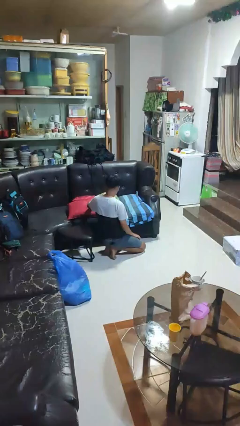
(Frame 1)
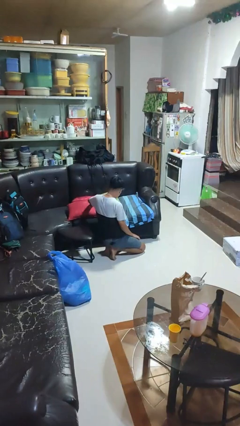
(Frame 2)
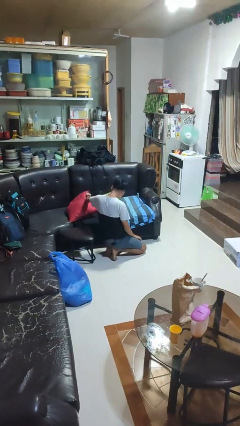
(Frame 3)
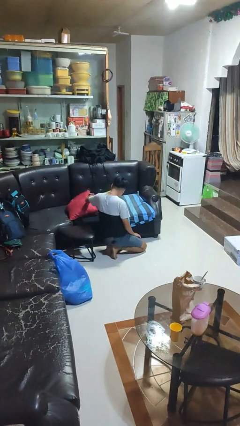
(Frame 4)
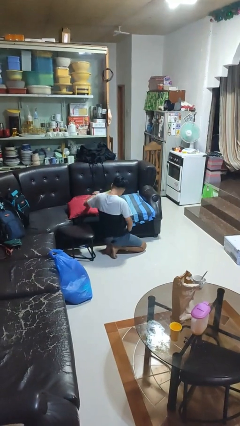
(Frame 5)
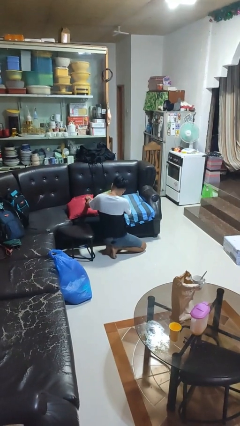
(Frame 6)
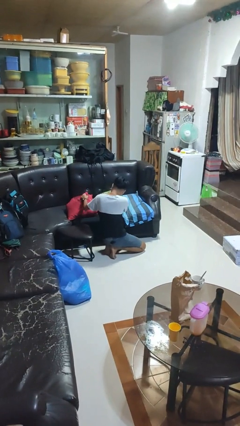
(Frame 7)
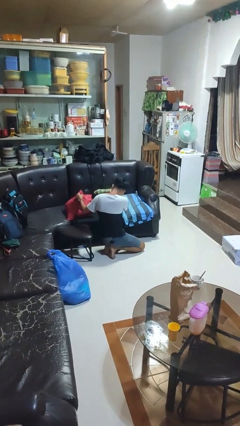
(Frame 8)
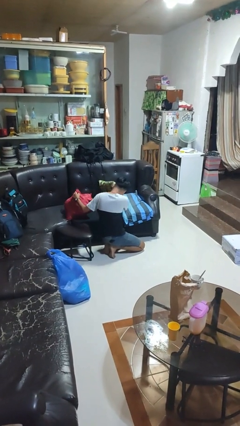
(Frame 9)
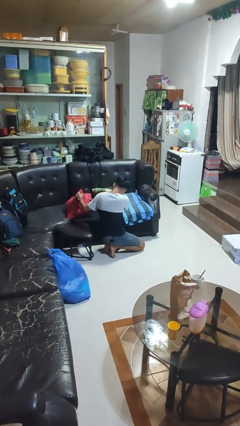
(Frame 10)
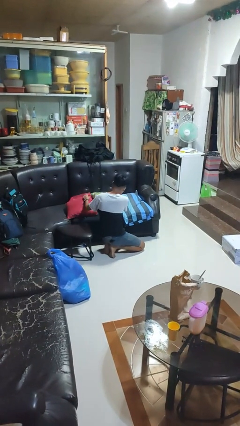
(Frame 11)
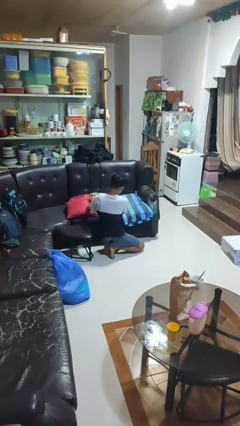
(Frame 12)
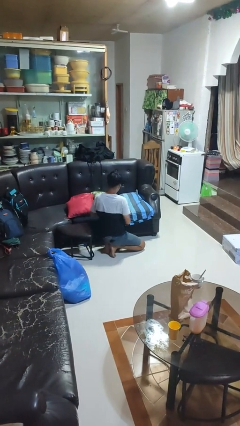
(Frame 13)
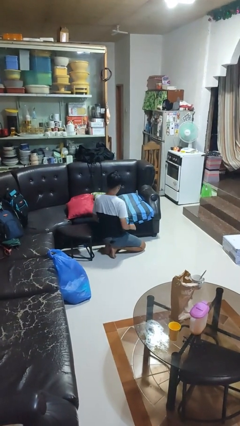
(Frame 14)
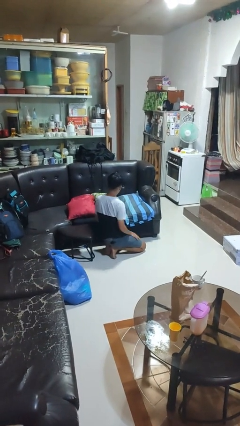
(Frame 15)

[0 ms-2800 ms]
person searches in couch

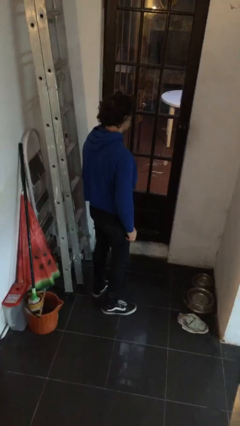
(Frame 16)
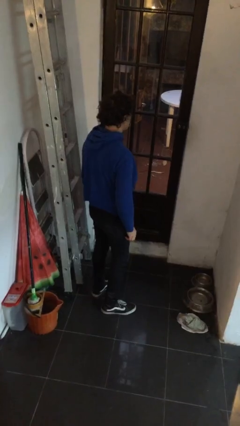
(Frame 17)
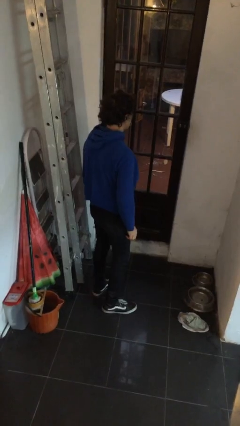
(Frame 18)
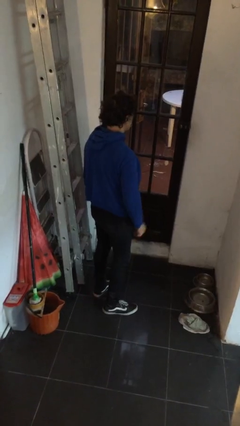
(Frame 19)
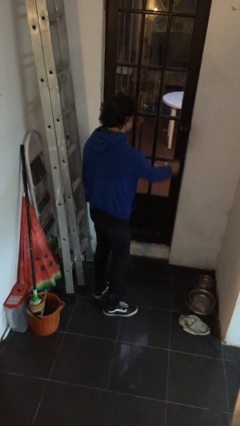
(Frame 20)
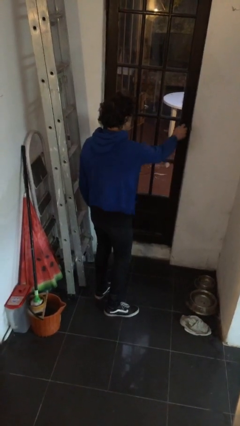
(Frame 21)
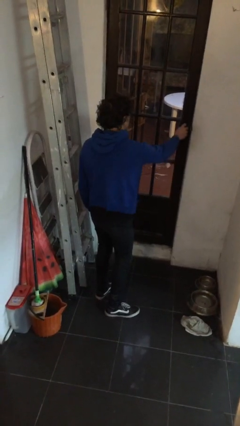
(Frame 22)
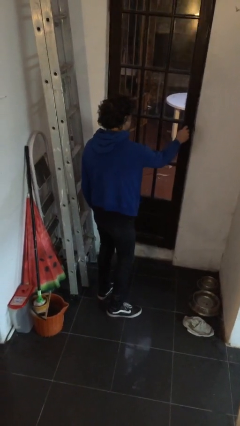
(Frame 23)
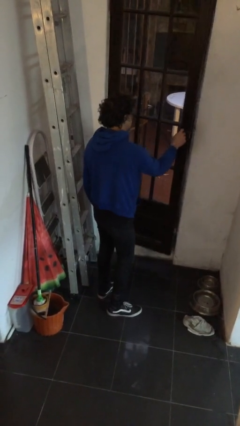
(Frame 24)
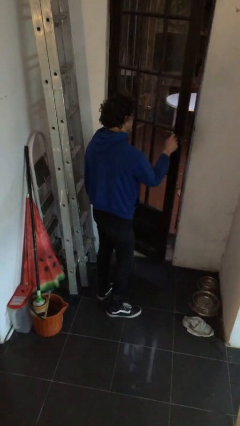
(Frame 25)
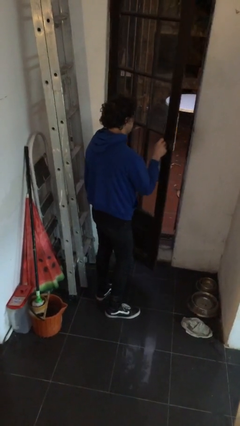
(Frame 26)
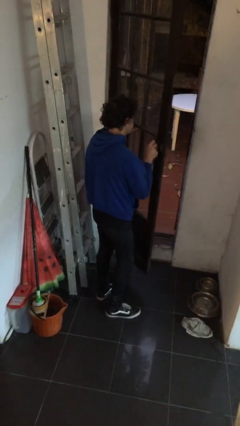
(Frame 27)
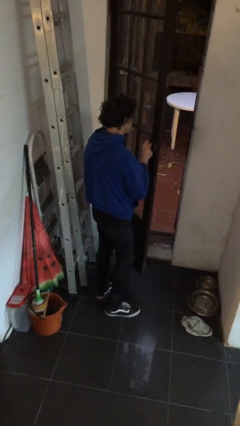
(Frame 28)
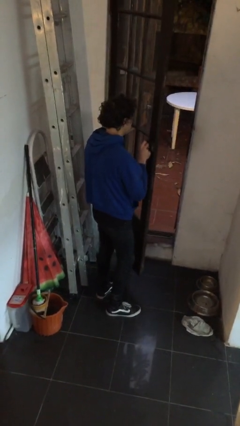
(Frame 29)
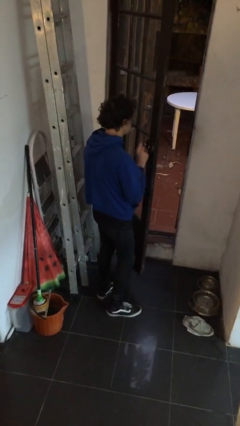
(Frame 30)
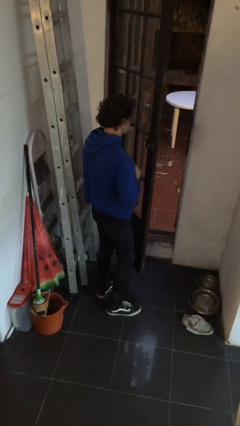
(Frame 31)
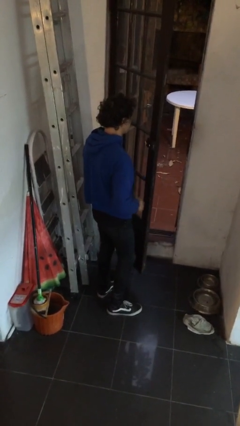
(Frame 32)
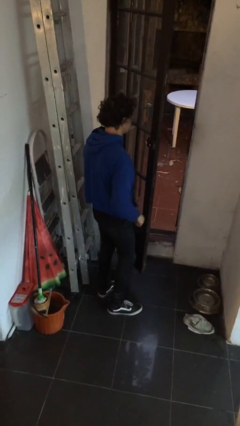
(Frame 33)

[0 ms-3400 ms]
person opens facility door

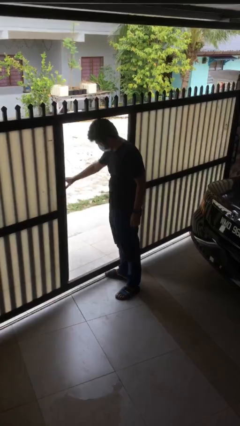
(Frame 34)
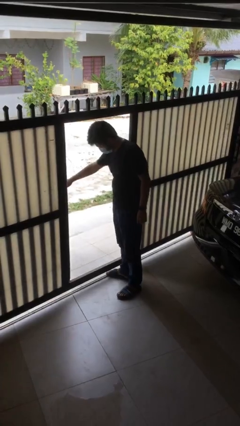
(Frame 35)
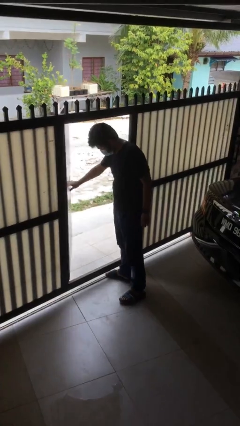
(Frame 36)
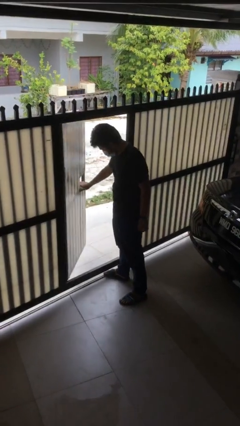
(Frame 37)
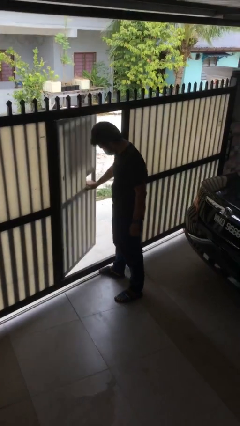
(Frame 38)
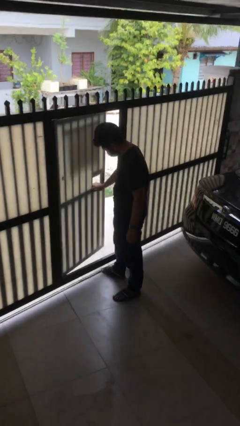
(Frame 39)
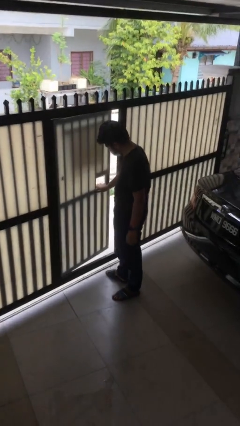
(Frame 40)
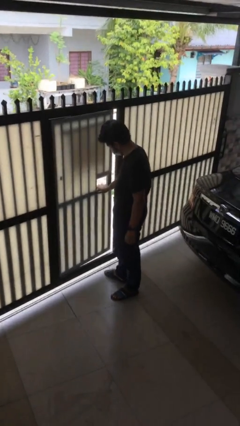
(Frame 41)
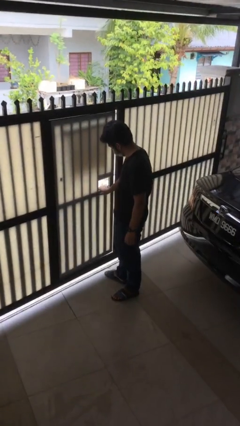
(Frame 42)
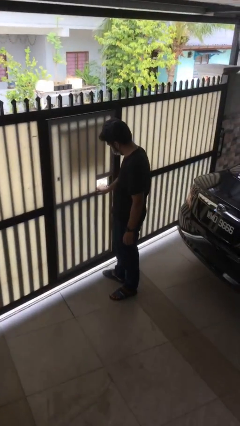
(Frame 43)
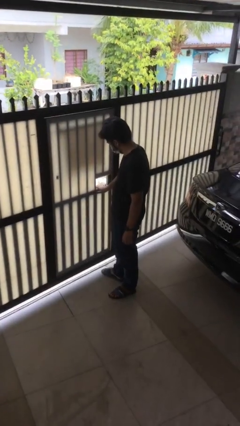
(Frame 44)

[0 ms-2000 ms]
person closes gate

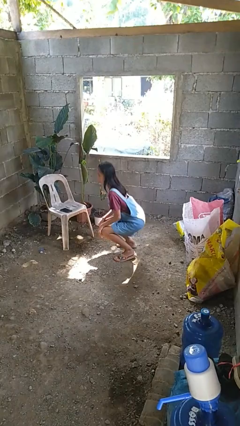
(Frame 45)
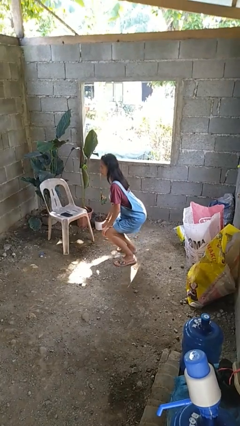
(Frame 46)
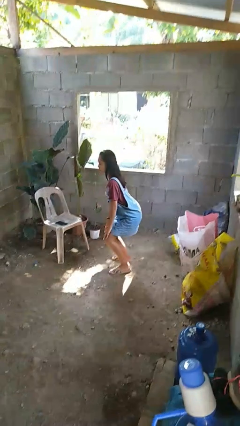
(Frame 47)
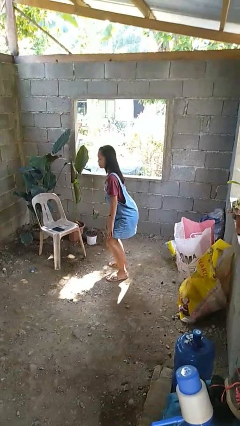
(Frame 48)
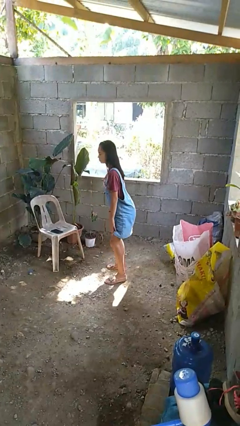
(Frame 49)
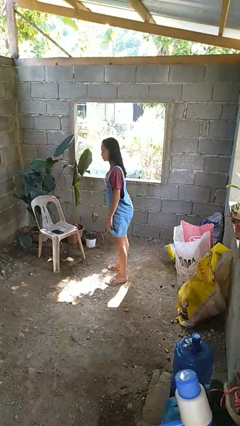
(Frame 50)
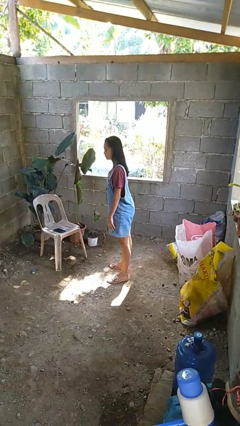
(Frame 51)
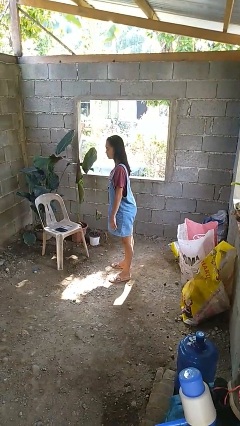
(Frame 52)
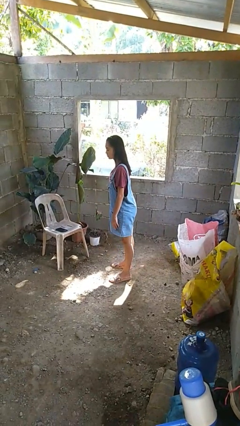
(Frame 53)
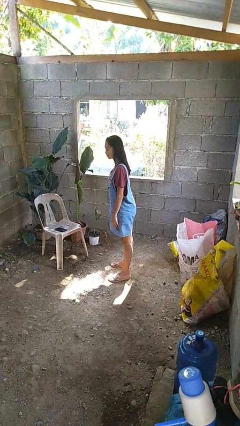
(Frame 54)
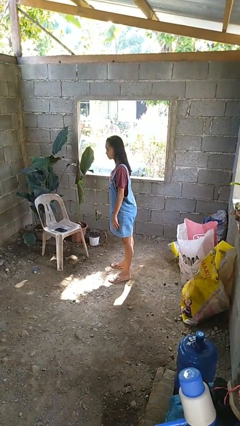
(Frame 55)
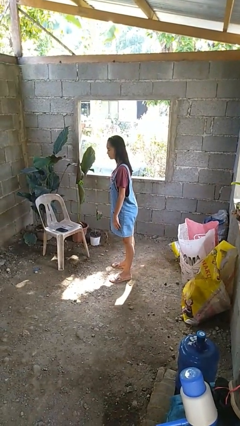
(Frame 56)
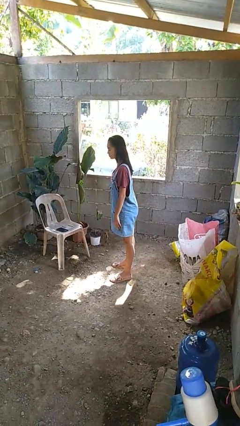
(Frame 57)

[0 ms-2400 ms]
person stands up

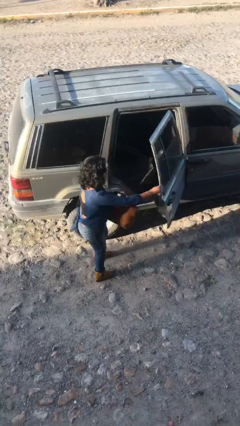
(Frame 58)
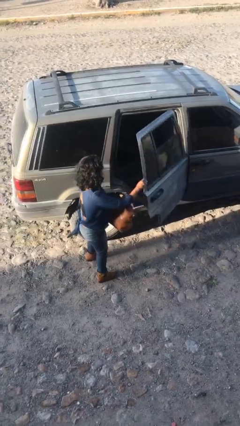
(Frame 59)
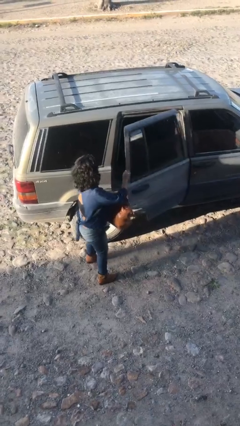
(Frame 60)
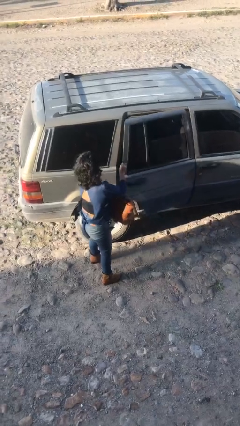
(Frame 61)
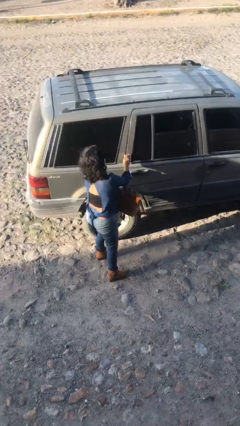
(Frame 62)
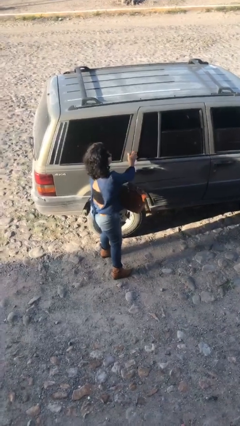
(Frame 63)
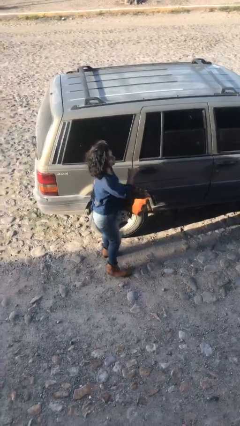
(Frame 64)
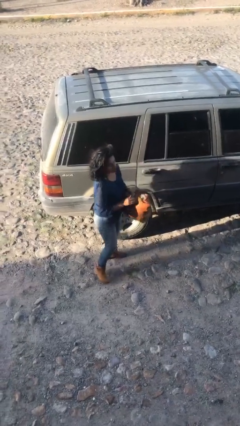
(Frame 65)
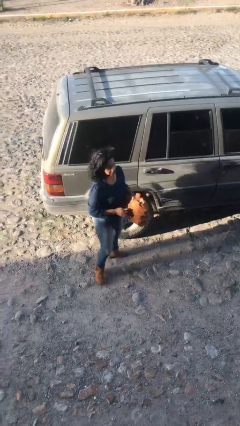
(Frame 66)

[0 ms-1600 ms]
person closes car door

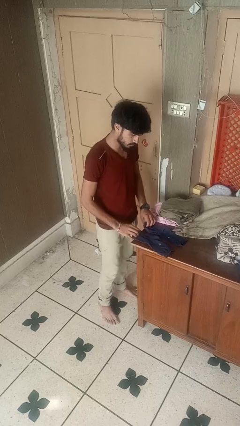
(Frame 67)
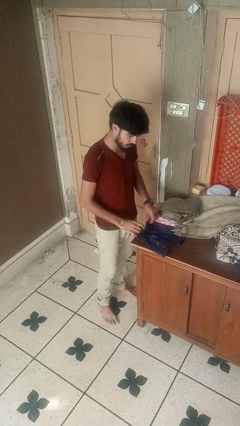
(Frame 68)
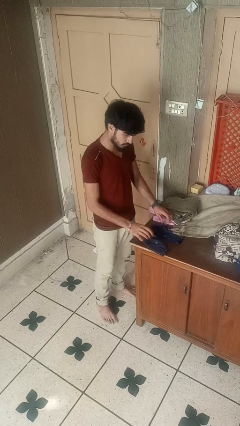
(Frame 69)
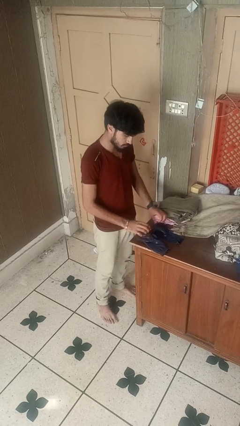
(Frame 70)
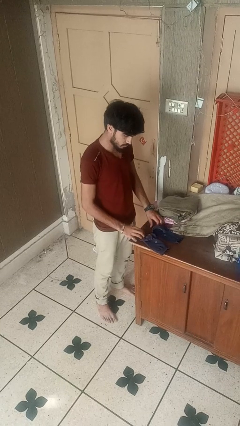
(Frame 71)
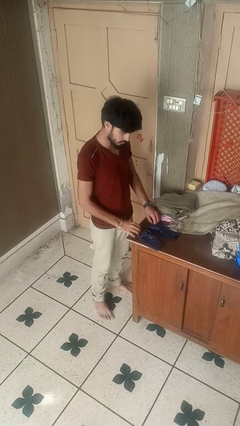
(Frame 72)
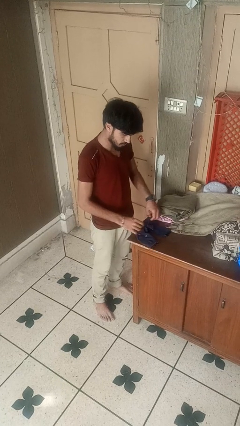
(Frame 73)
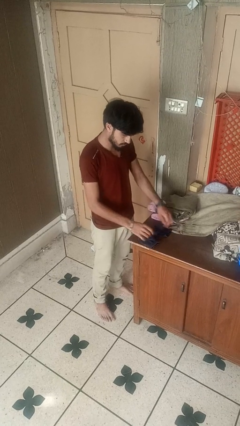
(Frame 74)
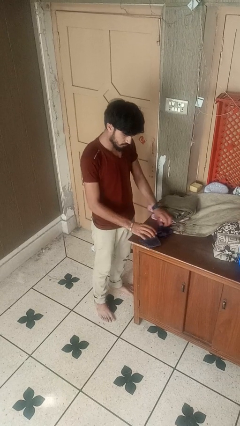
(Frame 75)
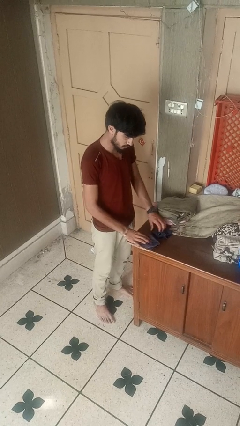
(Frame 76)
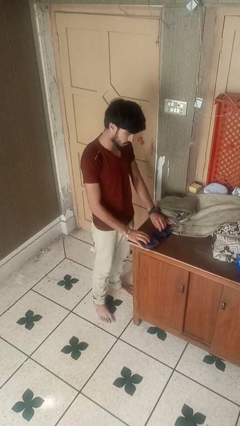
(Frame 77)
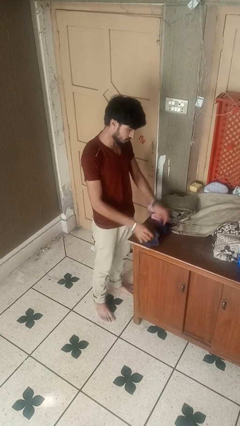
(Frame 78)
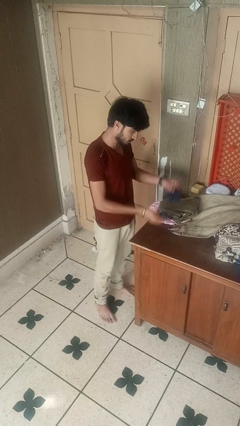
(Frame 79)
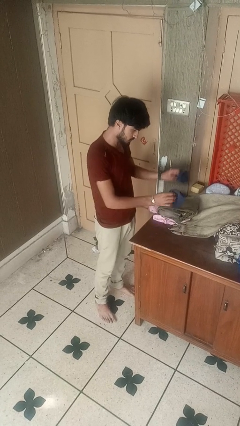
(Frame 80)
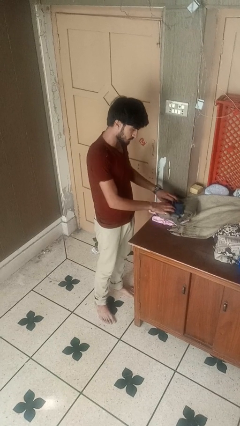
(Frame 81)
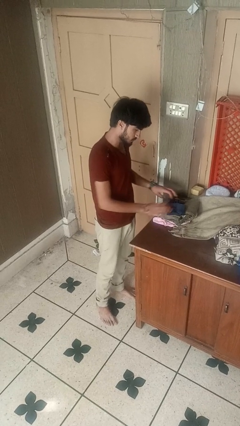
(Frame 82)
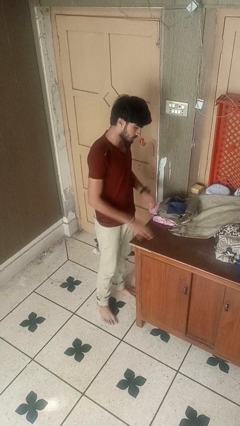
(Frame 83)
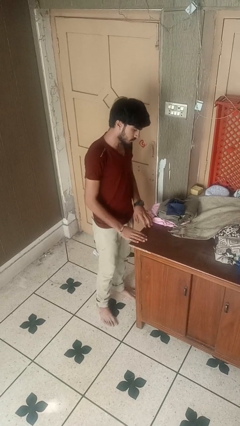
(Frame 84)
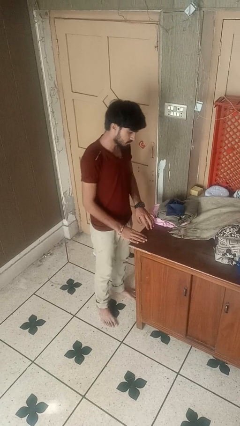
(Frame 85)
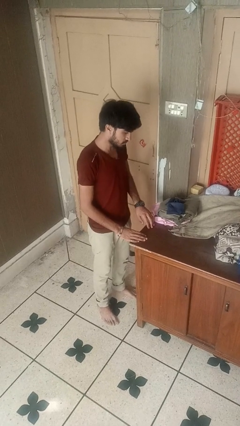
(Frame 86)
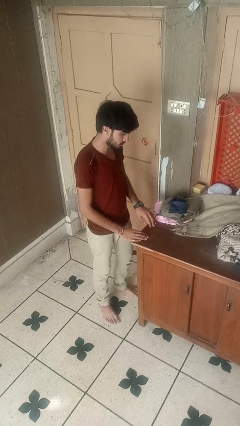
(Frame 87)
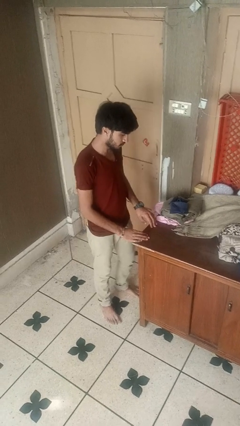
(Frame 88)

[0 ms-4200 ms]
person folds socks

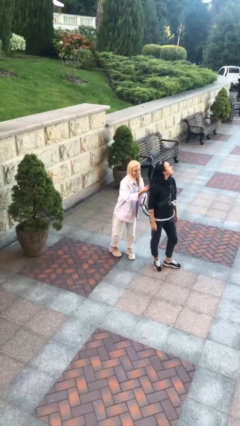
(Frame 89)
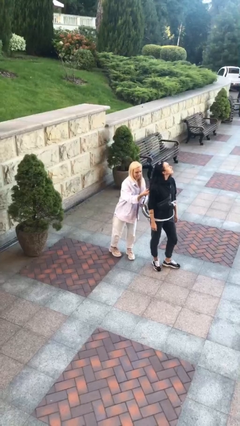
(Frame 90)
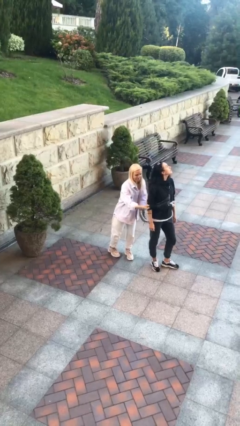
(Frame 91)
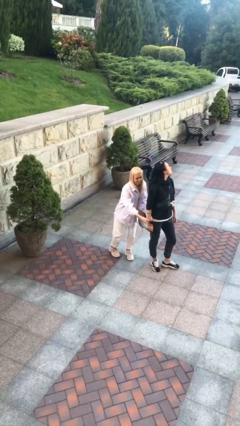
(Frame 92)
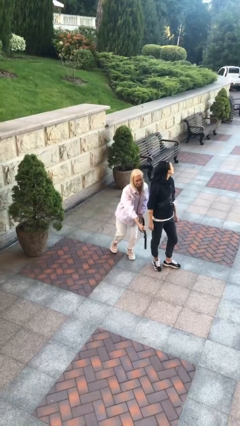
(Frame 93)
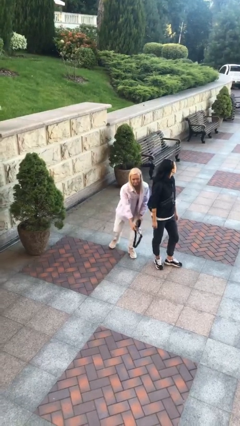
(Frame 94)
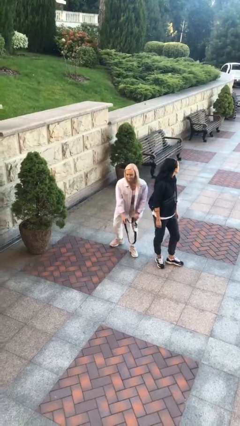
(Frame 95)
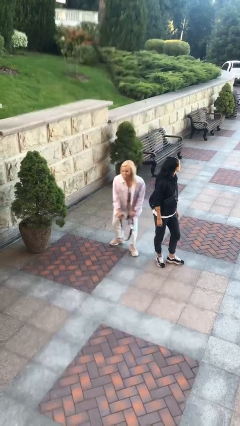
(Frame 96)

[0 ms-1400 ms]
person steals object from person
